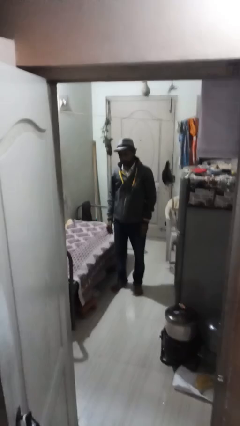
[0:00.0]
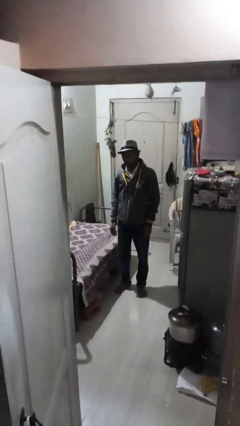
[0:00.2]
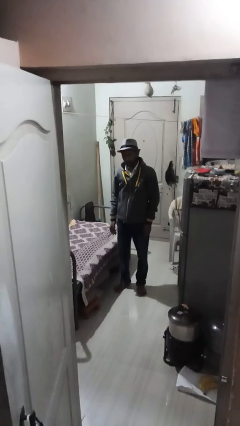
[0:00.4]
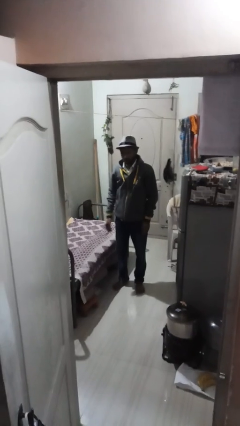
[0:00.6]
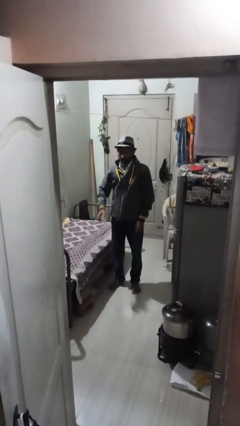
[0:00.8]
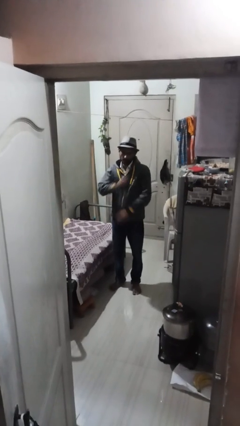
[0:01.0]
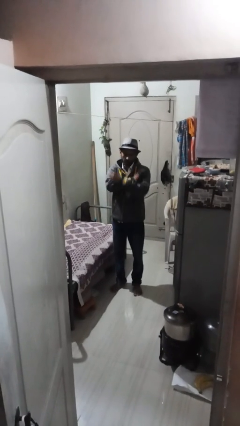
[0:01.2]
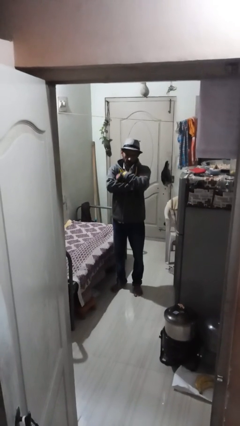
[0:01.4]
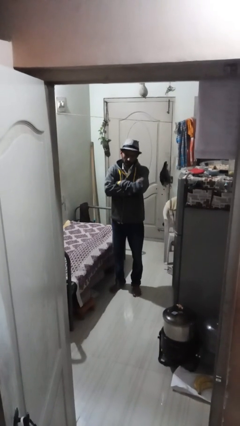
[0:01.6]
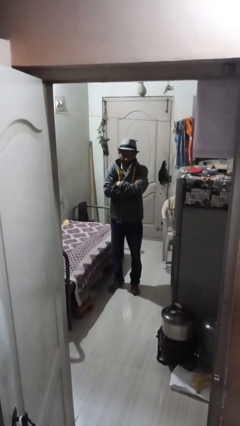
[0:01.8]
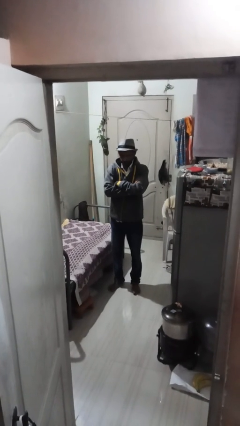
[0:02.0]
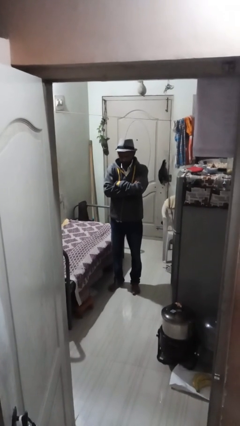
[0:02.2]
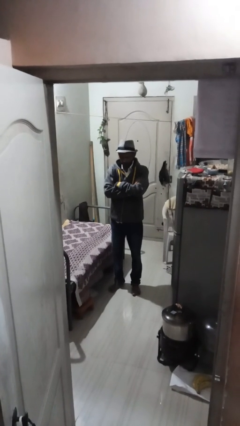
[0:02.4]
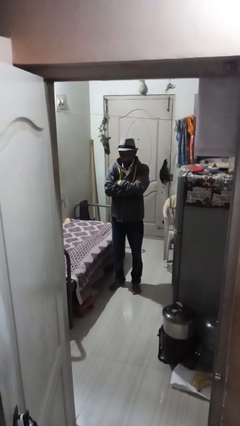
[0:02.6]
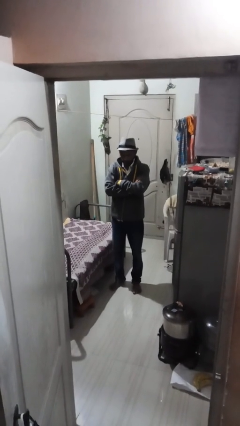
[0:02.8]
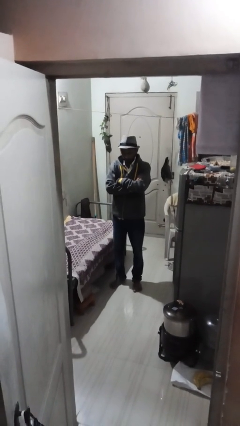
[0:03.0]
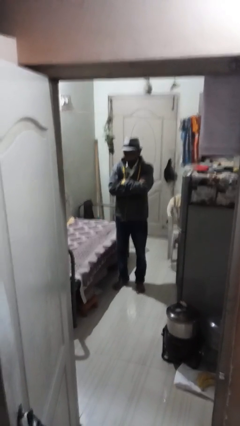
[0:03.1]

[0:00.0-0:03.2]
person crosses arms

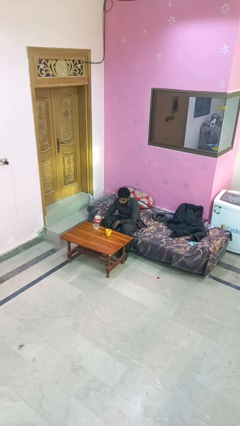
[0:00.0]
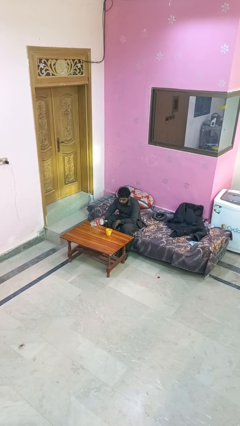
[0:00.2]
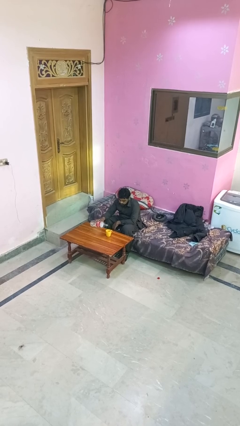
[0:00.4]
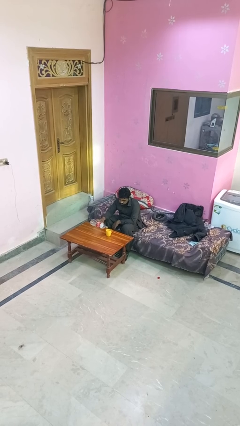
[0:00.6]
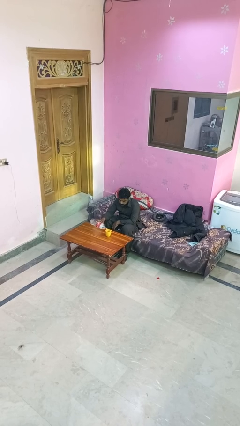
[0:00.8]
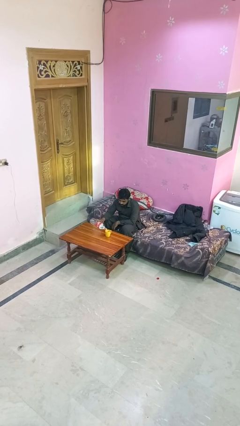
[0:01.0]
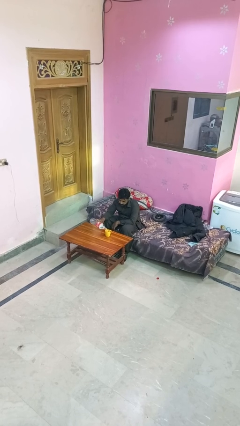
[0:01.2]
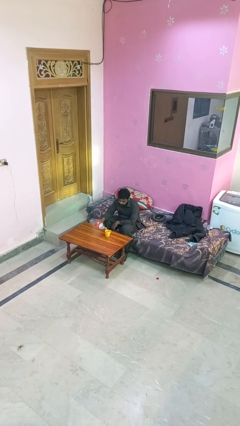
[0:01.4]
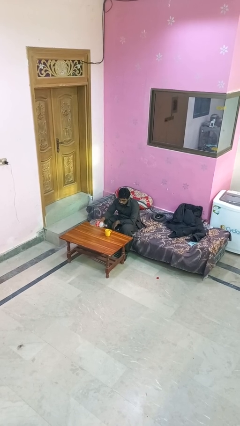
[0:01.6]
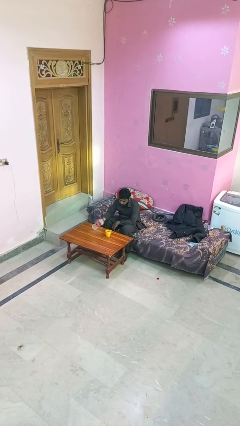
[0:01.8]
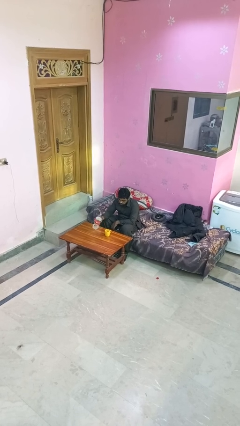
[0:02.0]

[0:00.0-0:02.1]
person pours liquid into cup

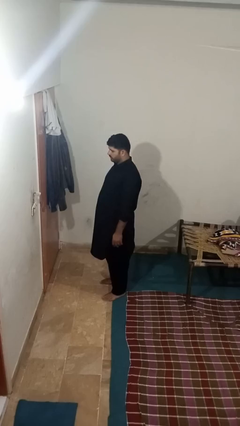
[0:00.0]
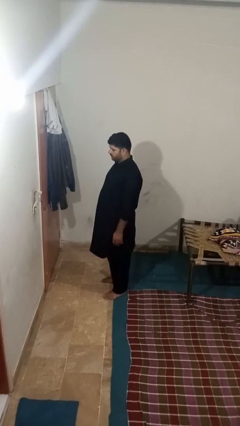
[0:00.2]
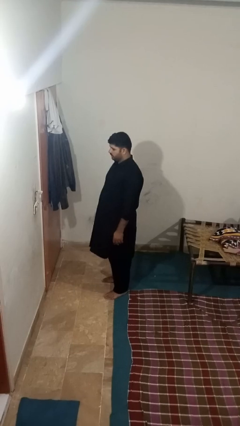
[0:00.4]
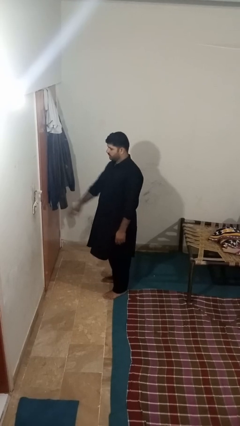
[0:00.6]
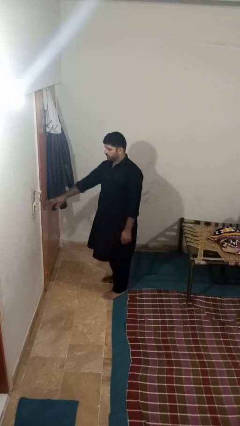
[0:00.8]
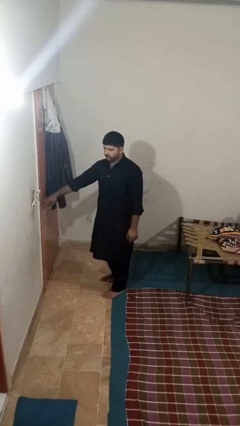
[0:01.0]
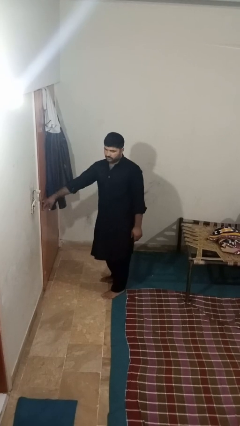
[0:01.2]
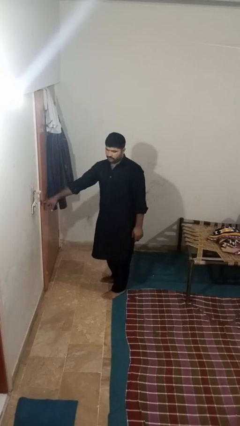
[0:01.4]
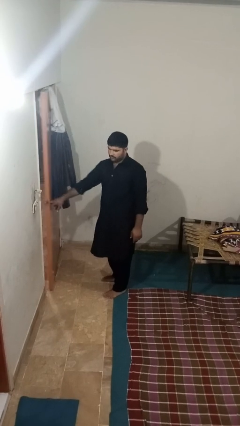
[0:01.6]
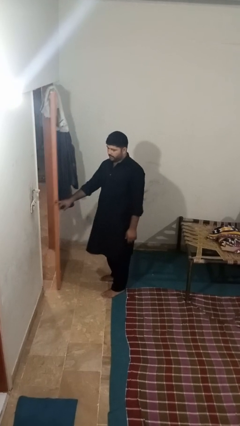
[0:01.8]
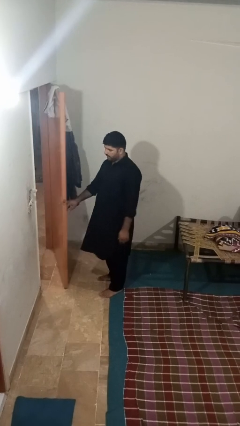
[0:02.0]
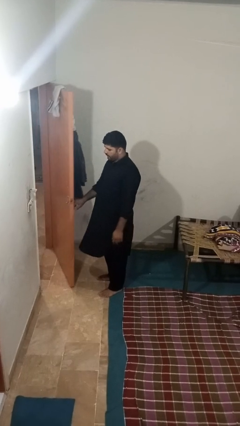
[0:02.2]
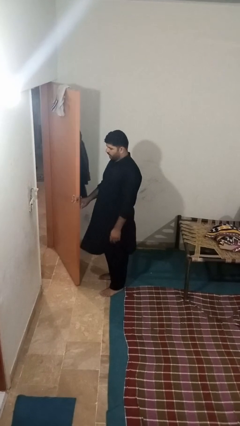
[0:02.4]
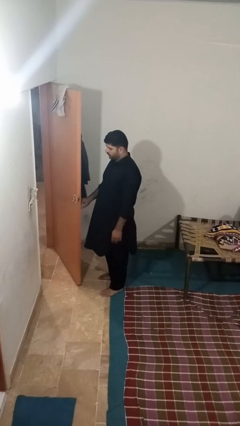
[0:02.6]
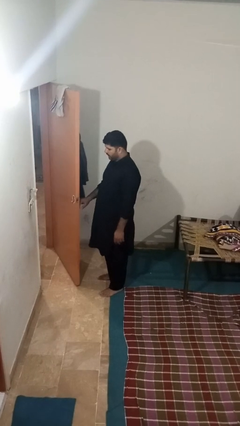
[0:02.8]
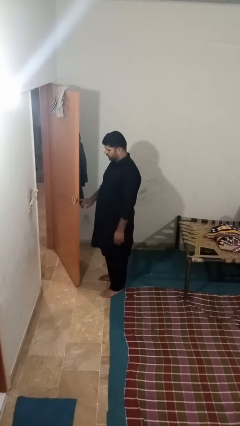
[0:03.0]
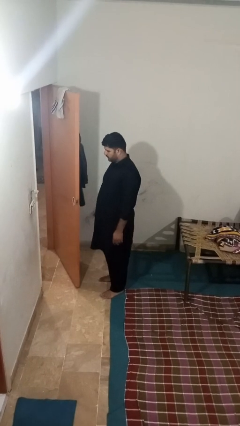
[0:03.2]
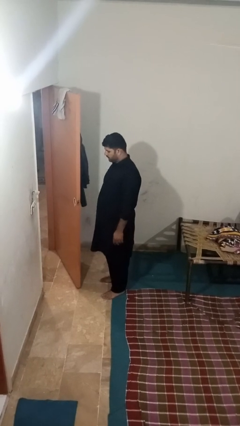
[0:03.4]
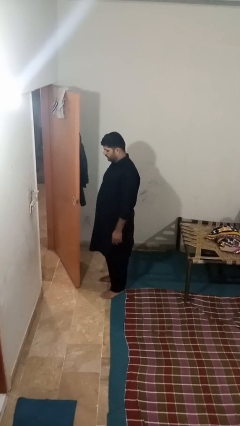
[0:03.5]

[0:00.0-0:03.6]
person opens facility door

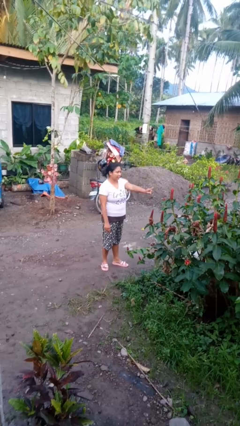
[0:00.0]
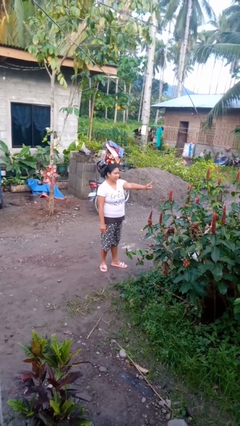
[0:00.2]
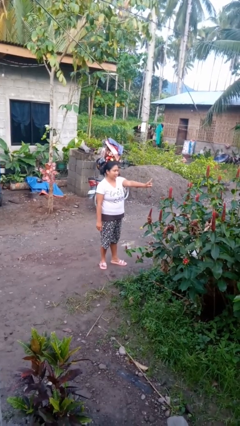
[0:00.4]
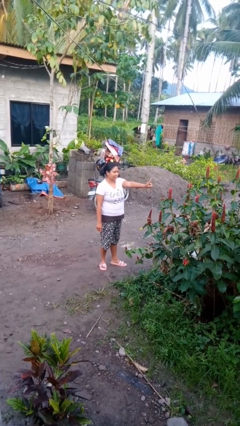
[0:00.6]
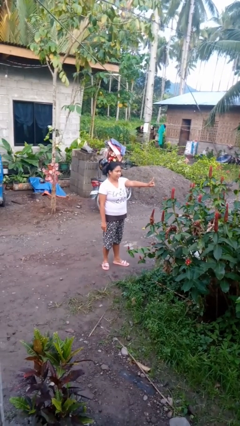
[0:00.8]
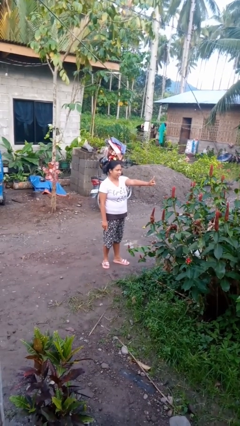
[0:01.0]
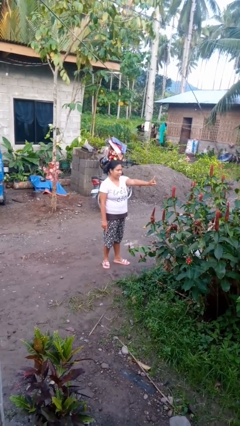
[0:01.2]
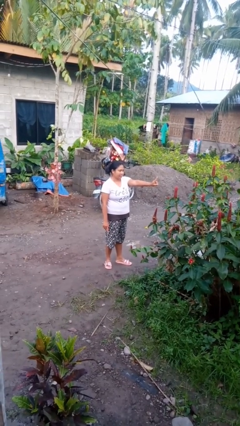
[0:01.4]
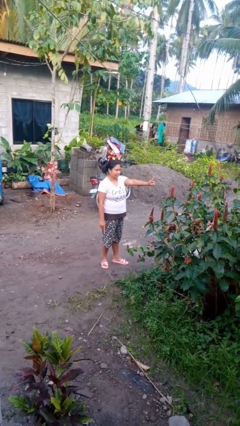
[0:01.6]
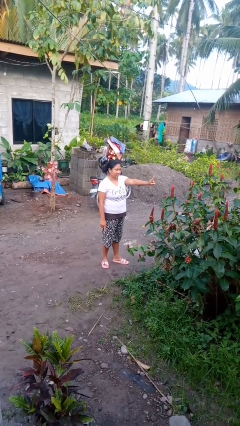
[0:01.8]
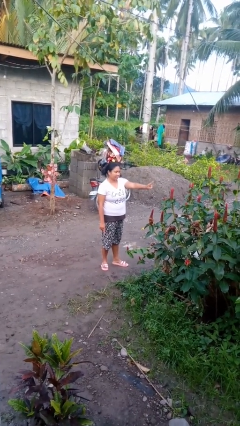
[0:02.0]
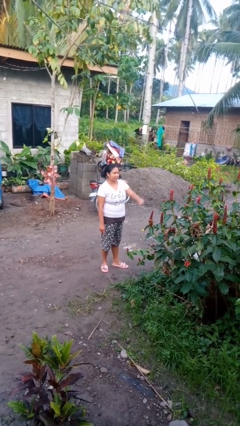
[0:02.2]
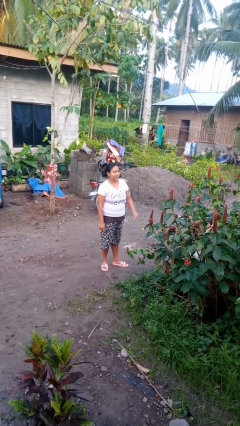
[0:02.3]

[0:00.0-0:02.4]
person gestures number one

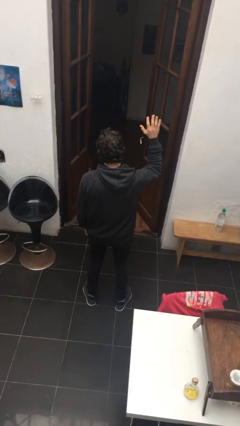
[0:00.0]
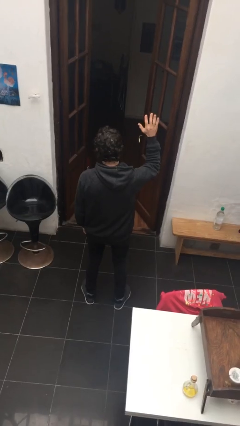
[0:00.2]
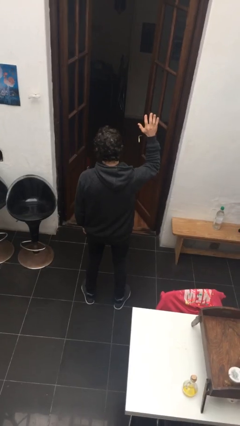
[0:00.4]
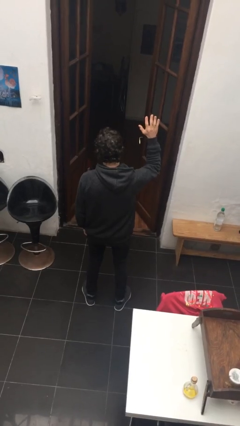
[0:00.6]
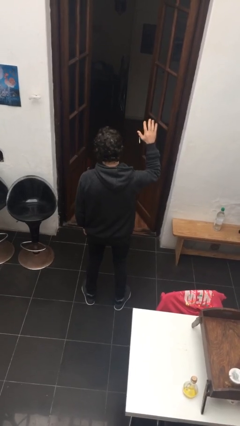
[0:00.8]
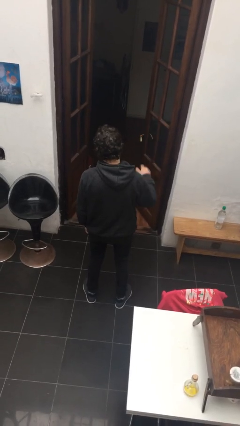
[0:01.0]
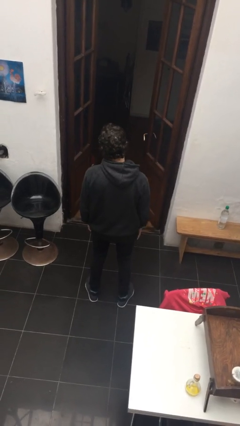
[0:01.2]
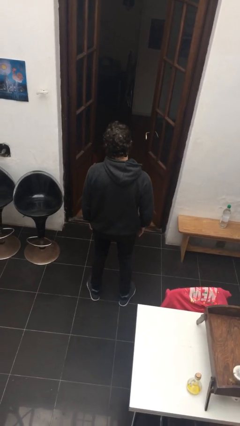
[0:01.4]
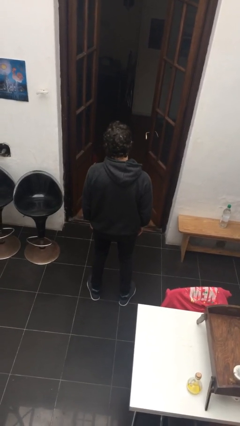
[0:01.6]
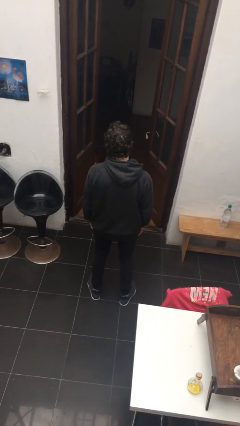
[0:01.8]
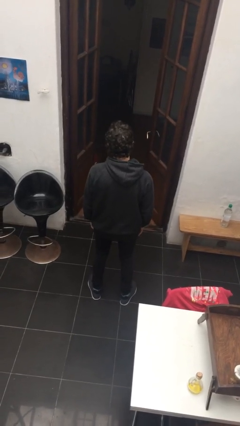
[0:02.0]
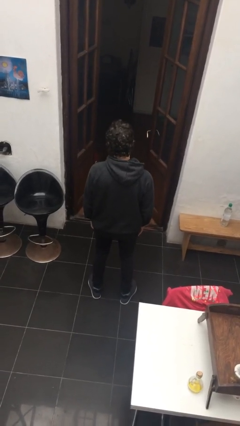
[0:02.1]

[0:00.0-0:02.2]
person gestures lower hand

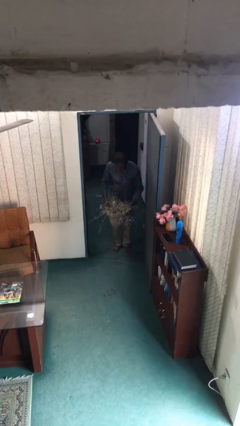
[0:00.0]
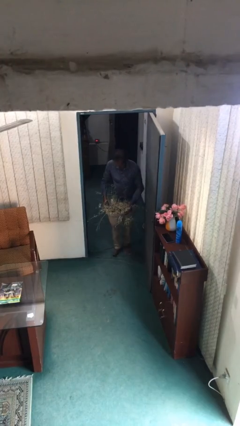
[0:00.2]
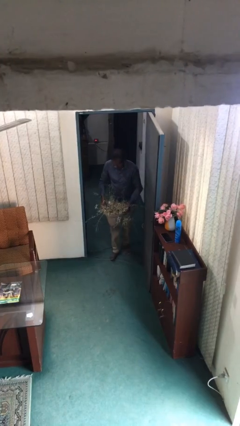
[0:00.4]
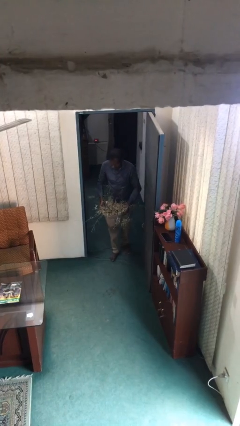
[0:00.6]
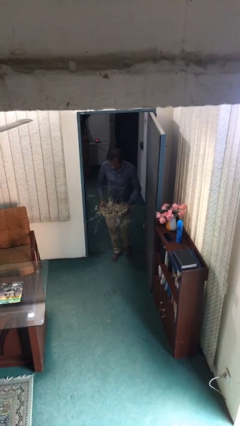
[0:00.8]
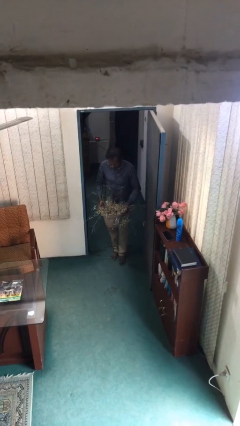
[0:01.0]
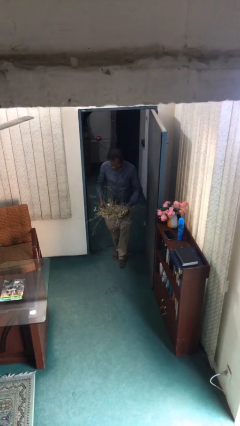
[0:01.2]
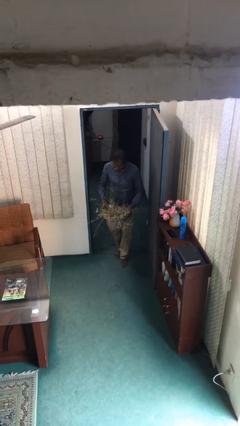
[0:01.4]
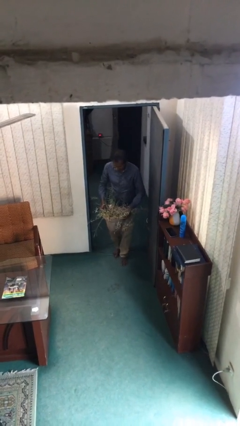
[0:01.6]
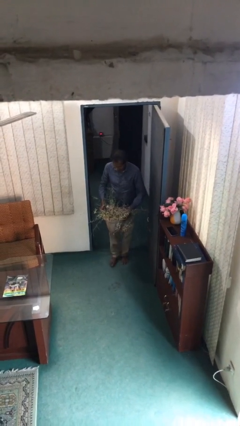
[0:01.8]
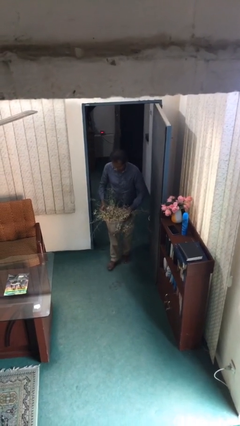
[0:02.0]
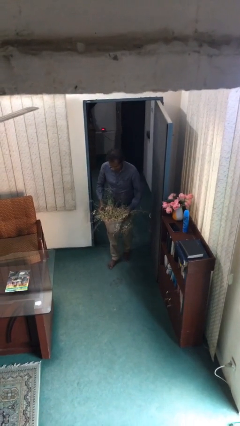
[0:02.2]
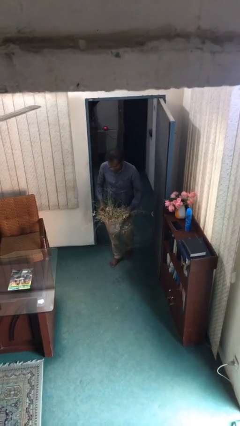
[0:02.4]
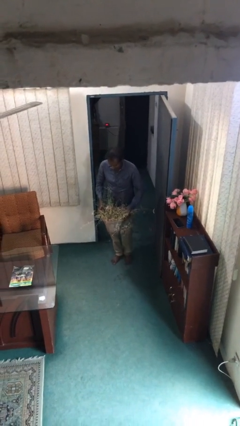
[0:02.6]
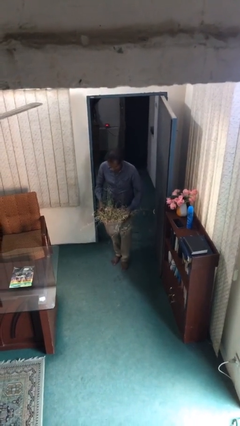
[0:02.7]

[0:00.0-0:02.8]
person carries heavy object

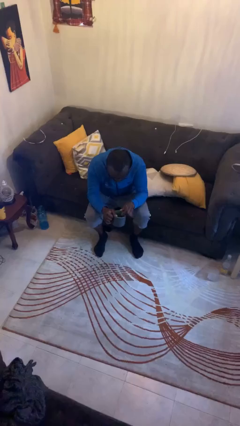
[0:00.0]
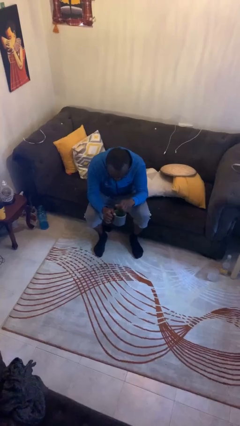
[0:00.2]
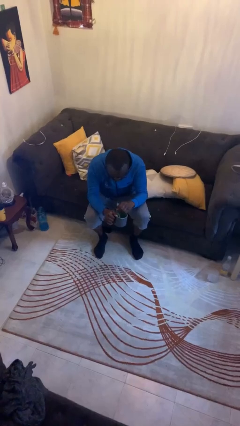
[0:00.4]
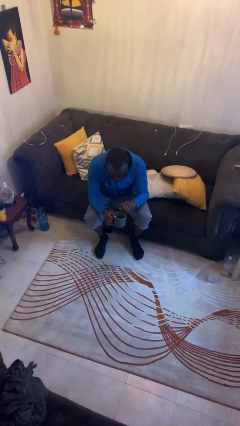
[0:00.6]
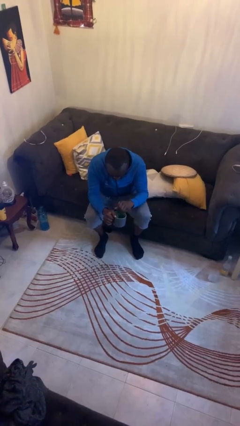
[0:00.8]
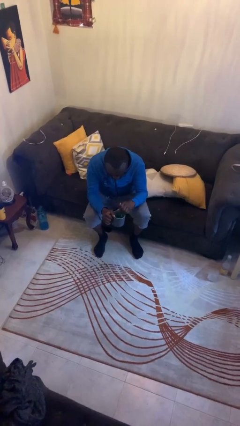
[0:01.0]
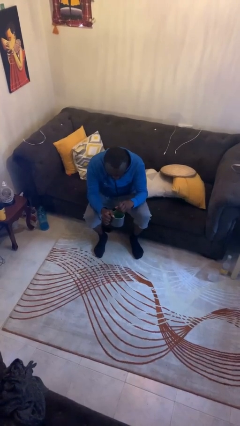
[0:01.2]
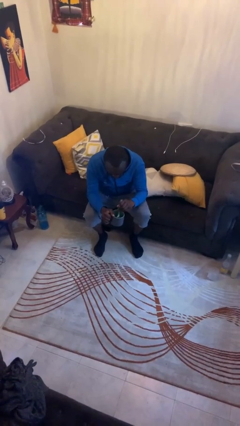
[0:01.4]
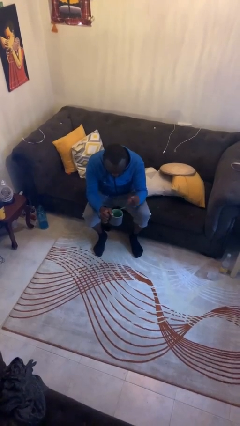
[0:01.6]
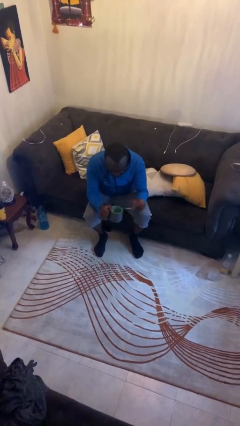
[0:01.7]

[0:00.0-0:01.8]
person stirs mug
